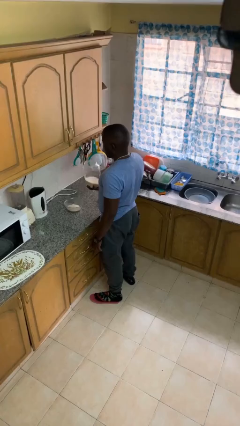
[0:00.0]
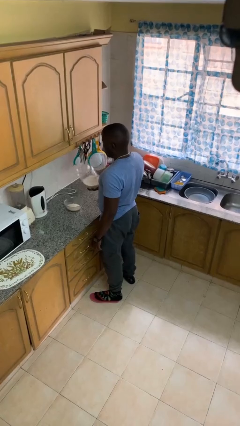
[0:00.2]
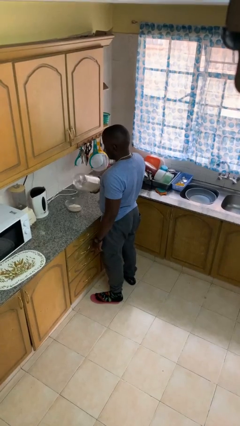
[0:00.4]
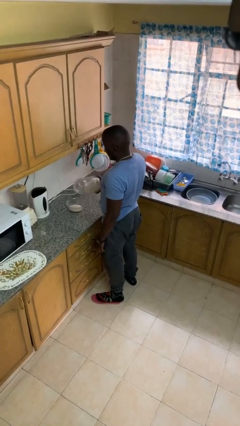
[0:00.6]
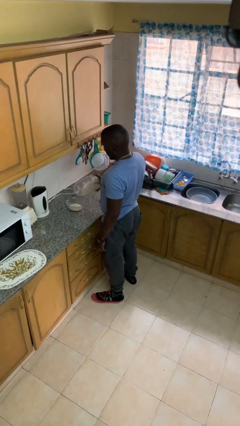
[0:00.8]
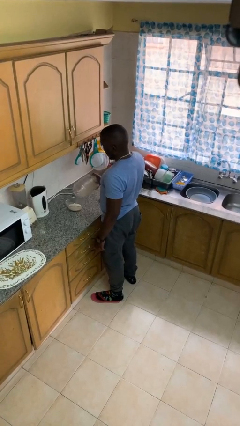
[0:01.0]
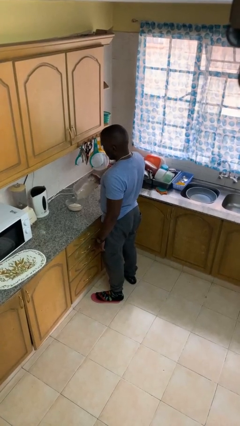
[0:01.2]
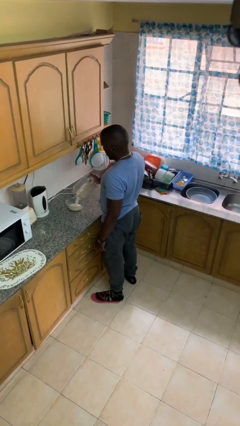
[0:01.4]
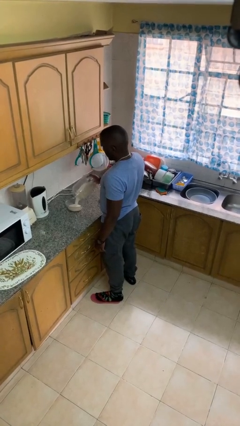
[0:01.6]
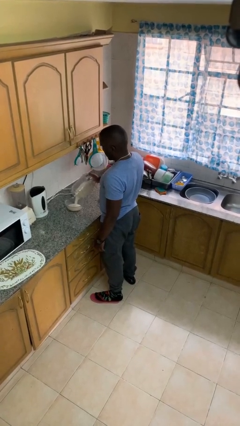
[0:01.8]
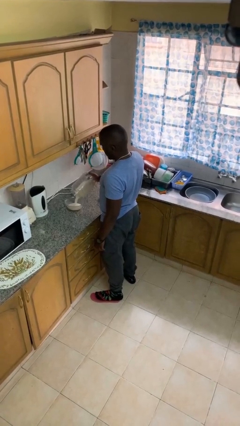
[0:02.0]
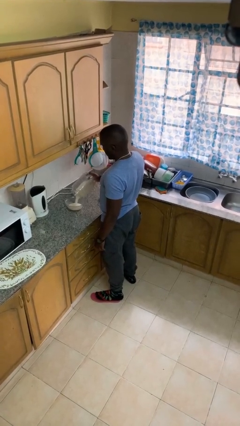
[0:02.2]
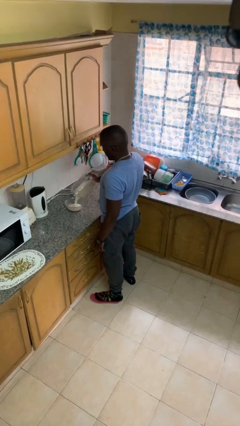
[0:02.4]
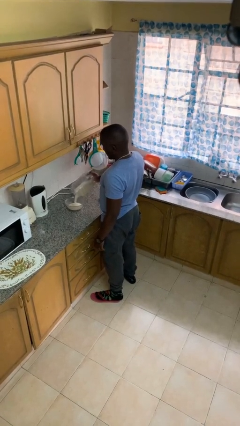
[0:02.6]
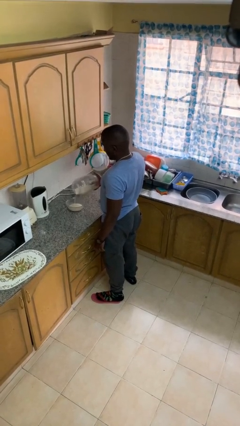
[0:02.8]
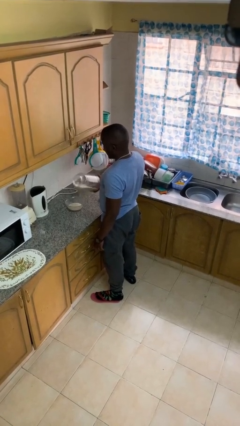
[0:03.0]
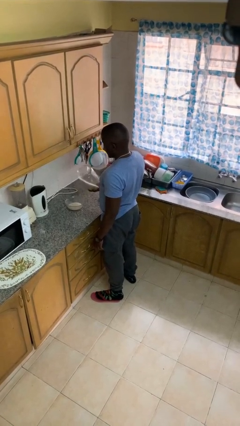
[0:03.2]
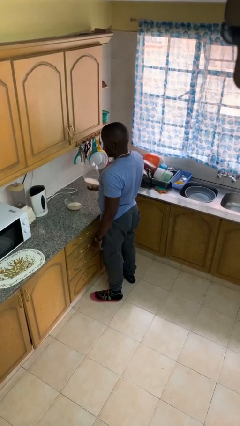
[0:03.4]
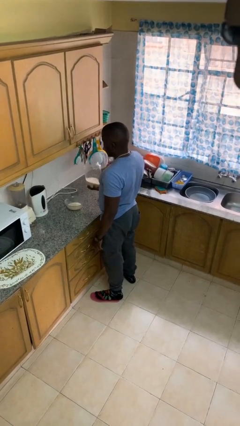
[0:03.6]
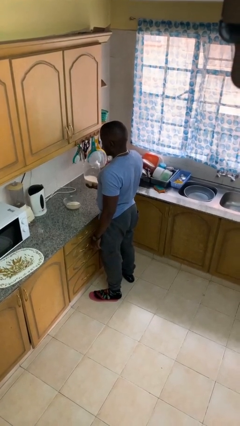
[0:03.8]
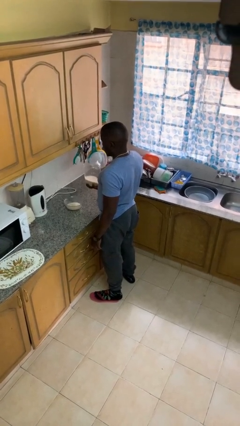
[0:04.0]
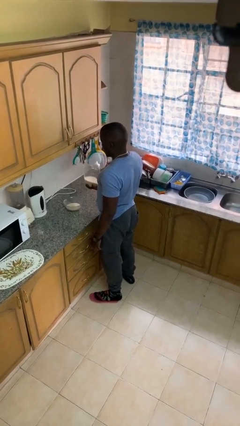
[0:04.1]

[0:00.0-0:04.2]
person pours into bowl

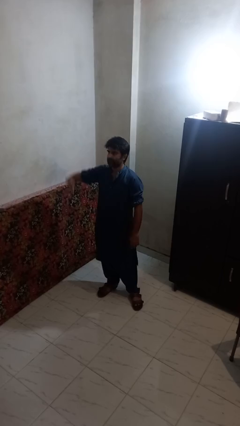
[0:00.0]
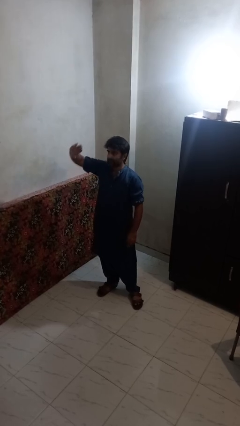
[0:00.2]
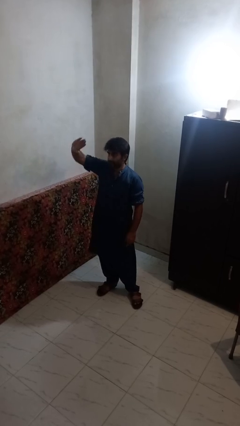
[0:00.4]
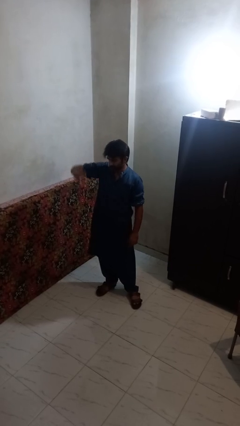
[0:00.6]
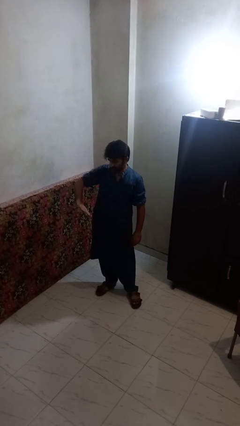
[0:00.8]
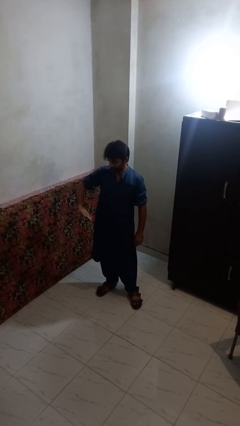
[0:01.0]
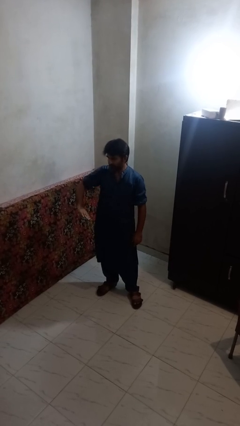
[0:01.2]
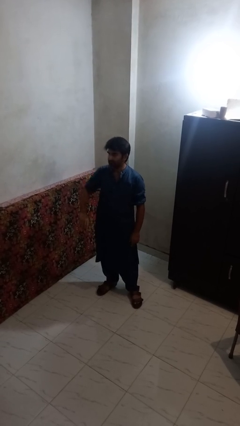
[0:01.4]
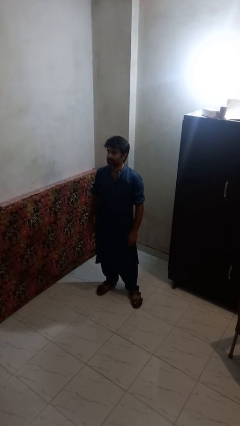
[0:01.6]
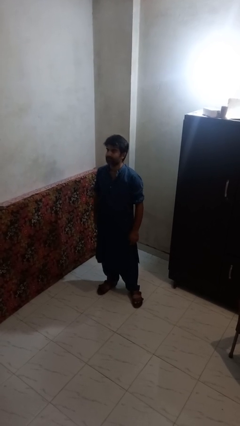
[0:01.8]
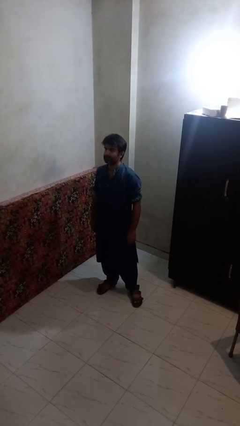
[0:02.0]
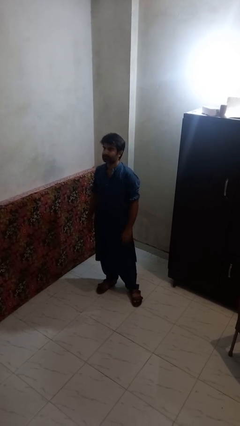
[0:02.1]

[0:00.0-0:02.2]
person gestures swipe down

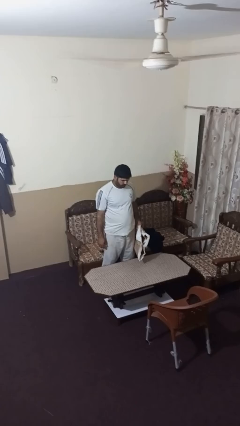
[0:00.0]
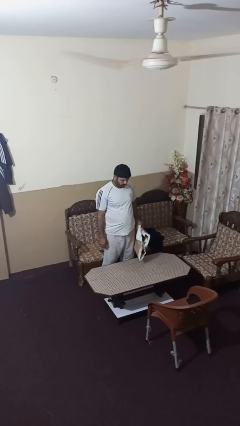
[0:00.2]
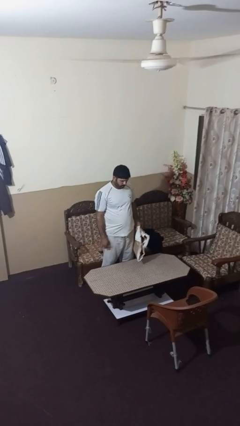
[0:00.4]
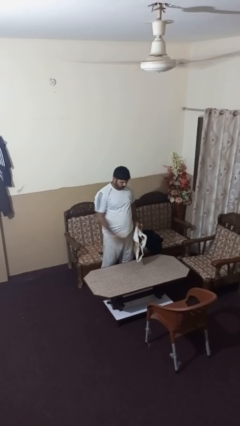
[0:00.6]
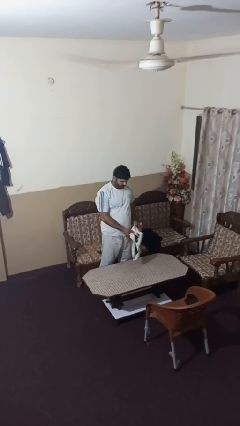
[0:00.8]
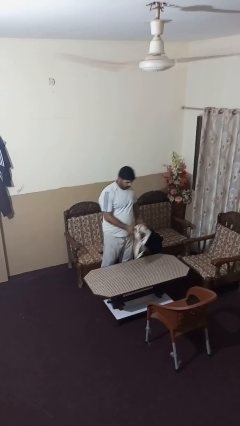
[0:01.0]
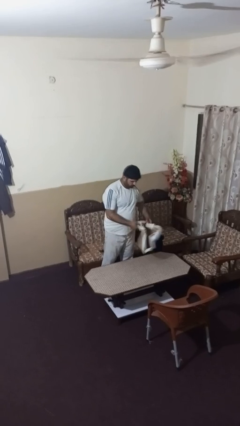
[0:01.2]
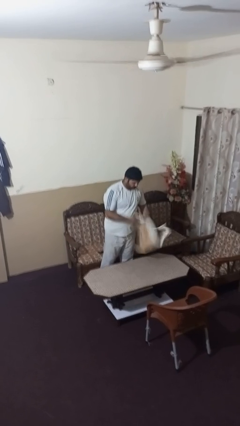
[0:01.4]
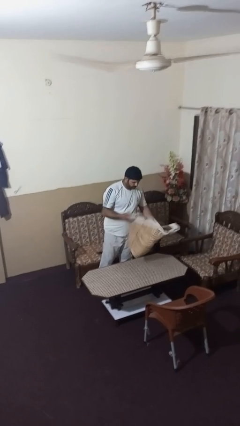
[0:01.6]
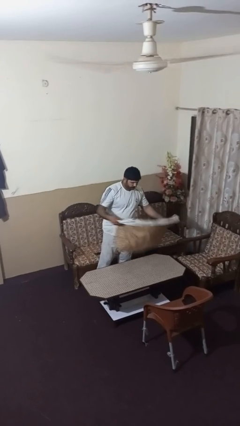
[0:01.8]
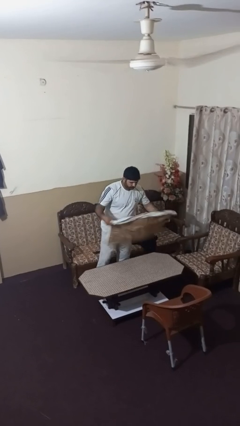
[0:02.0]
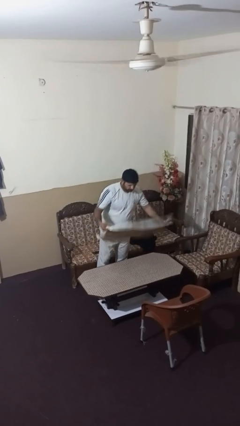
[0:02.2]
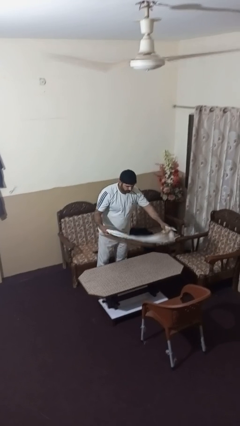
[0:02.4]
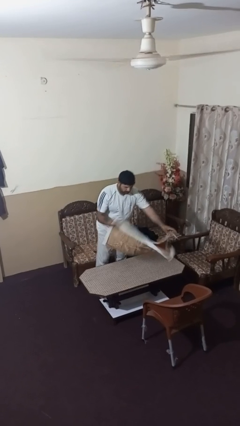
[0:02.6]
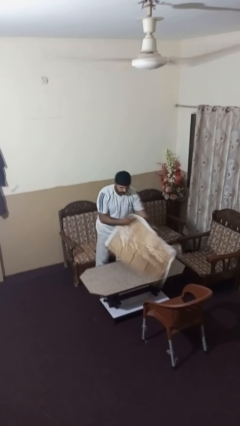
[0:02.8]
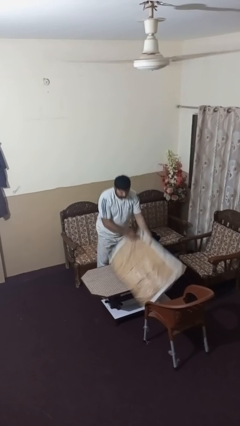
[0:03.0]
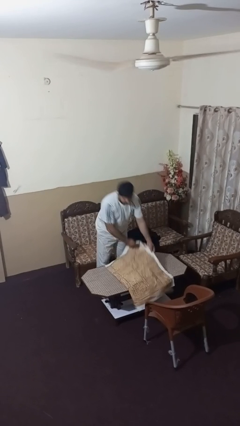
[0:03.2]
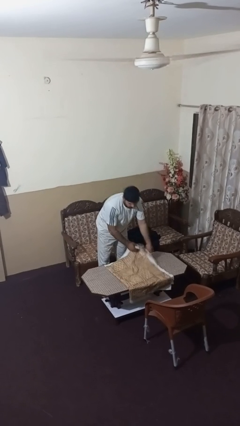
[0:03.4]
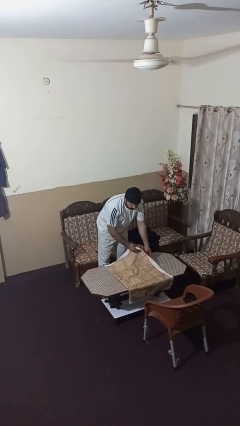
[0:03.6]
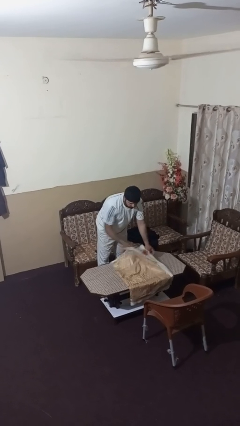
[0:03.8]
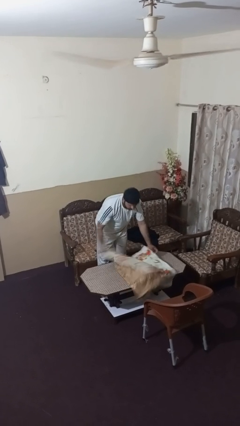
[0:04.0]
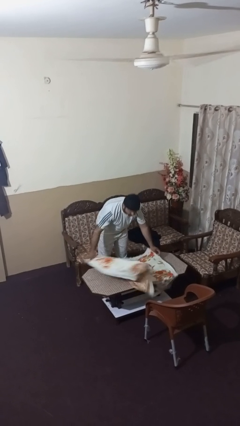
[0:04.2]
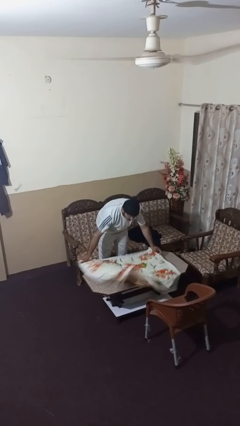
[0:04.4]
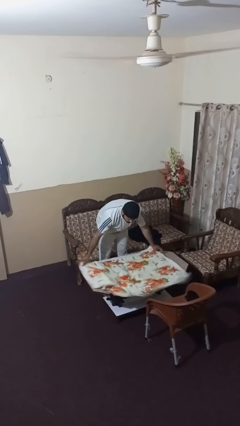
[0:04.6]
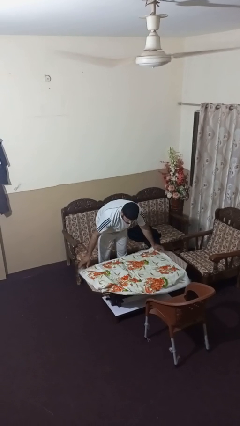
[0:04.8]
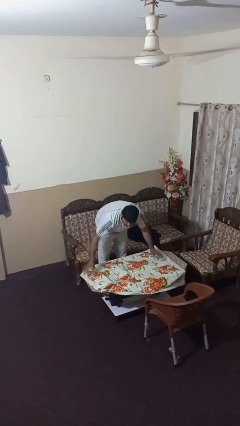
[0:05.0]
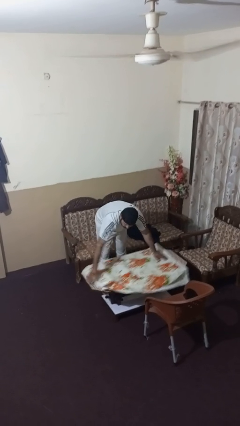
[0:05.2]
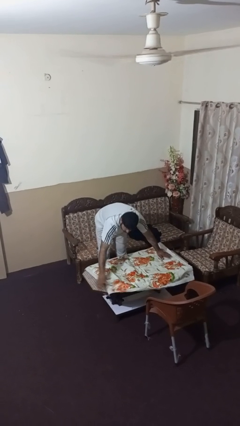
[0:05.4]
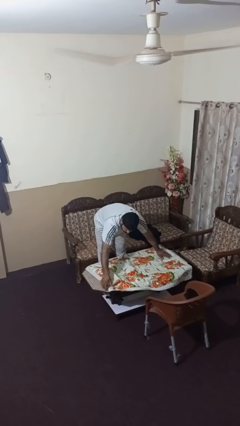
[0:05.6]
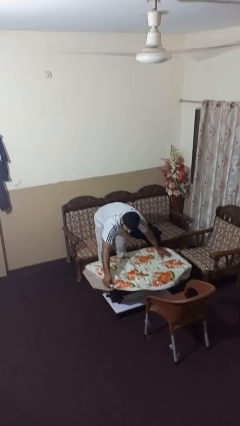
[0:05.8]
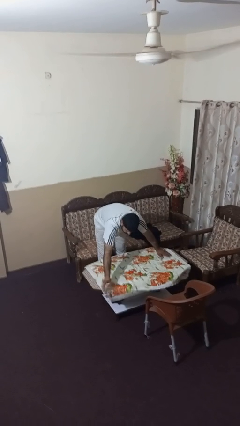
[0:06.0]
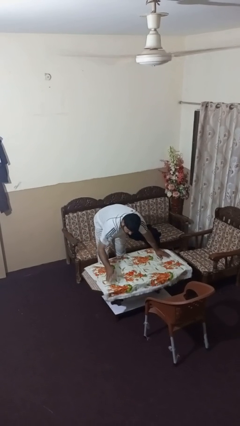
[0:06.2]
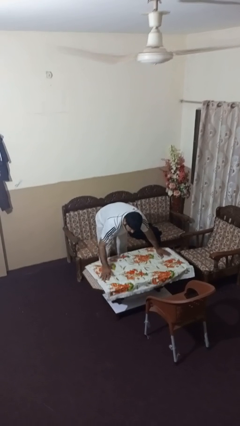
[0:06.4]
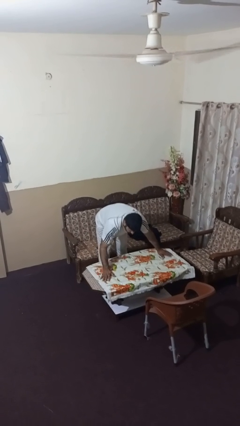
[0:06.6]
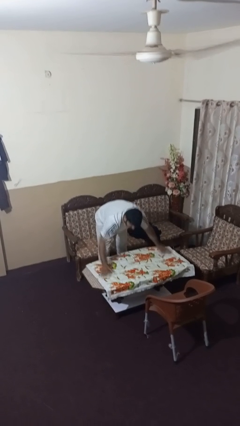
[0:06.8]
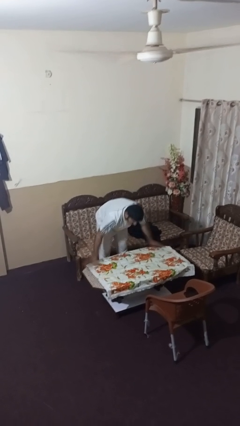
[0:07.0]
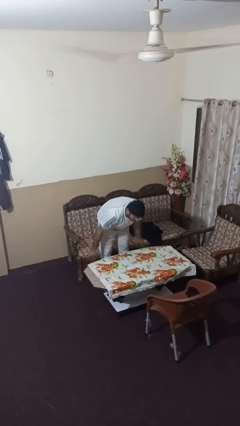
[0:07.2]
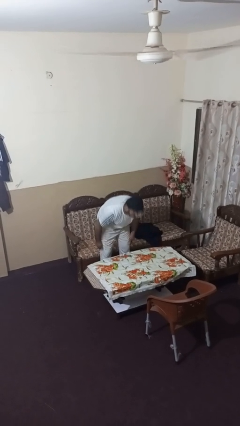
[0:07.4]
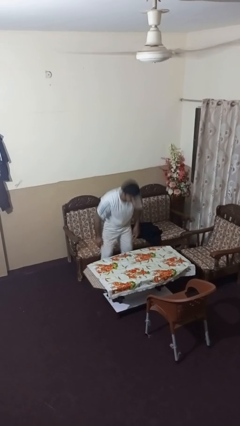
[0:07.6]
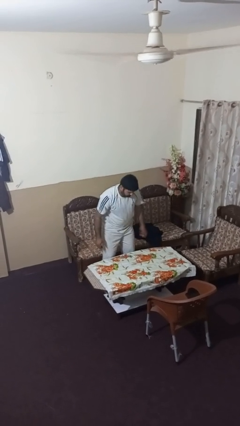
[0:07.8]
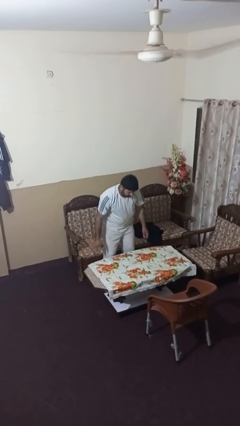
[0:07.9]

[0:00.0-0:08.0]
person spreads tablecloth

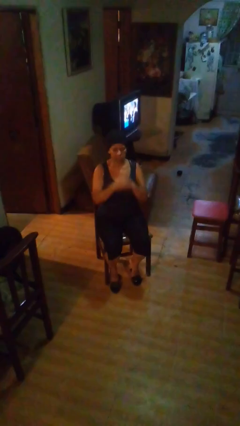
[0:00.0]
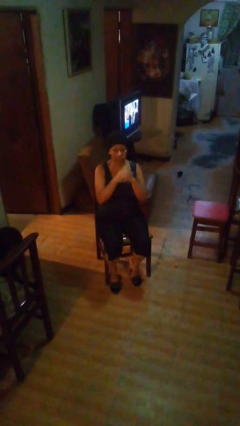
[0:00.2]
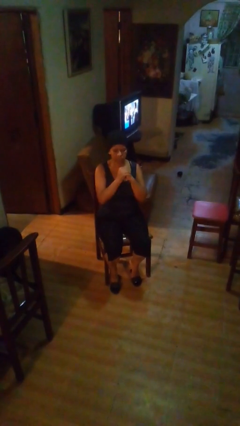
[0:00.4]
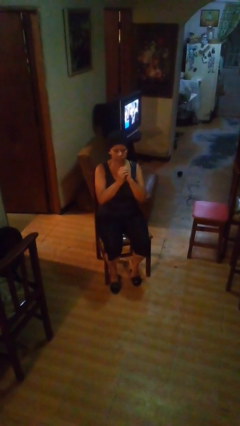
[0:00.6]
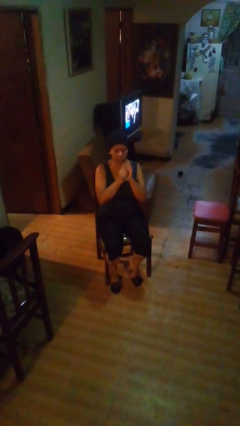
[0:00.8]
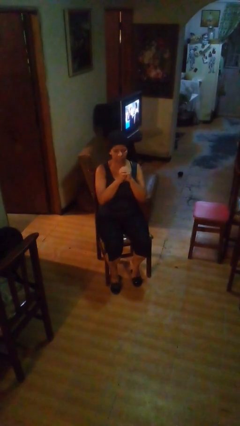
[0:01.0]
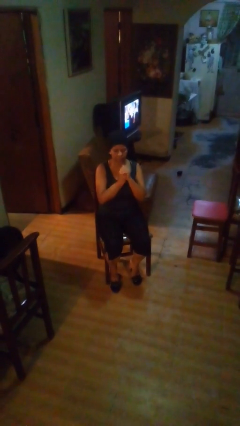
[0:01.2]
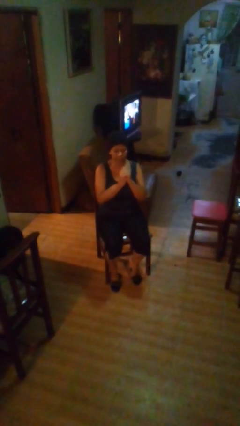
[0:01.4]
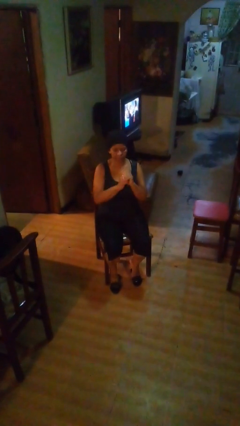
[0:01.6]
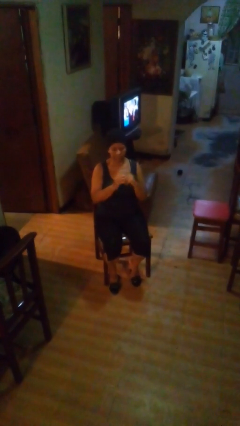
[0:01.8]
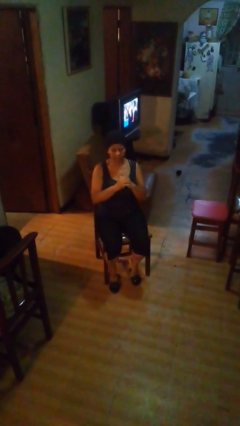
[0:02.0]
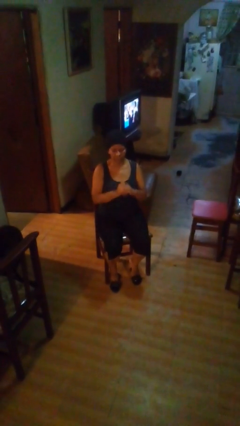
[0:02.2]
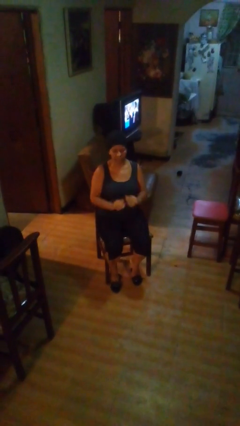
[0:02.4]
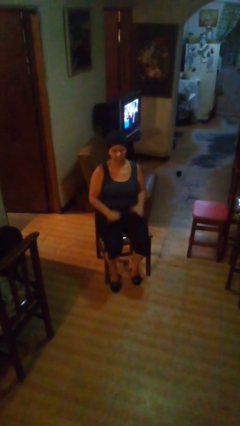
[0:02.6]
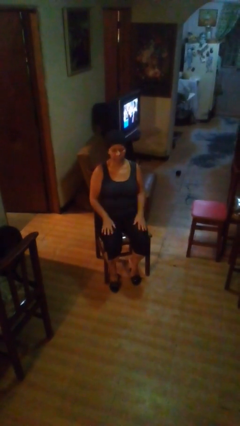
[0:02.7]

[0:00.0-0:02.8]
person cracks knuckles

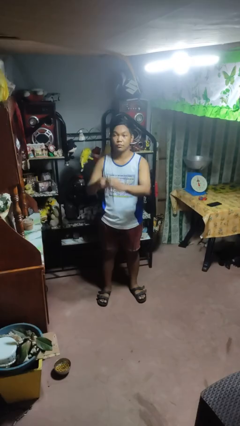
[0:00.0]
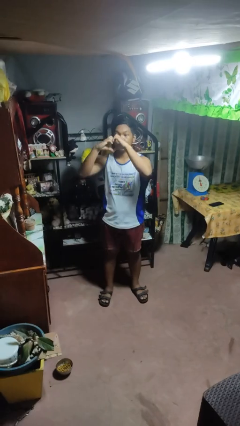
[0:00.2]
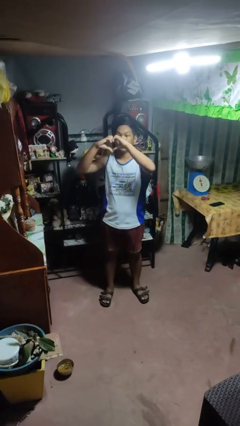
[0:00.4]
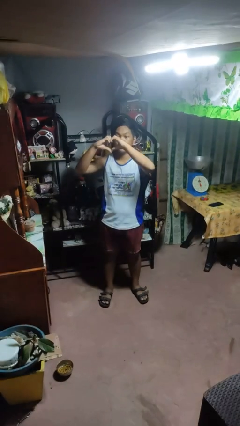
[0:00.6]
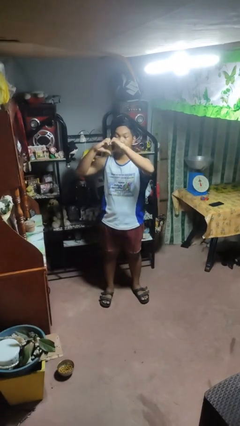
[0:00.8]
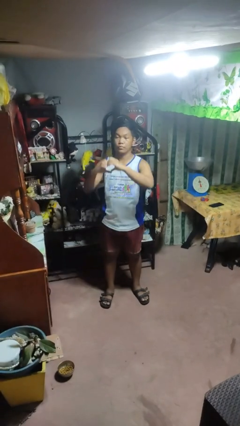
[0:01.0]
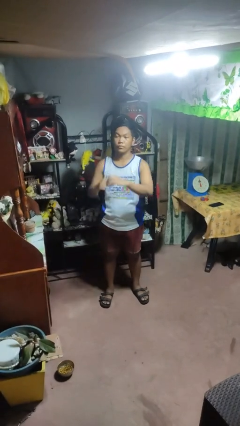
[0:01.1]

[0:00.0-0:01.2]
person gestures heart
